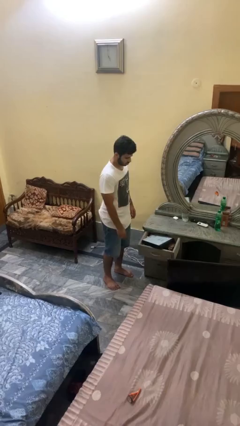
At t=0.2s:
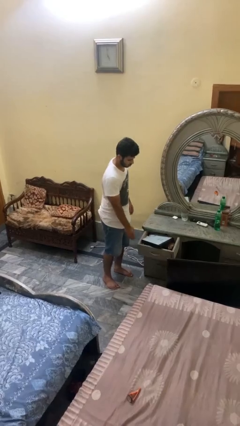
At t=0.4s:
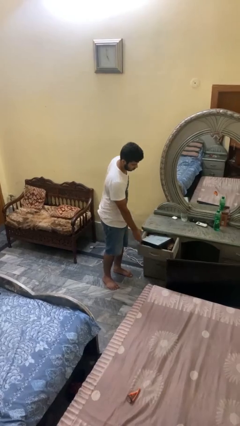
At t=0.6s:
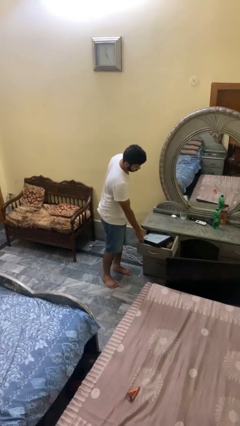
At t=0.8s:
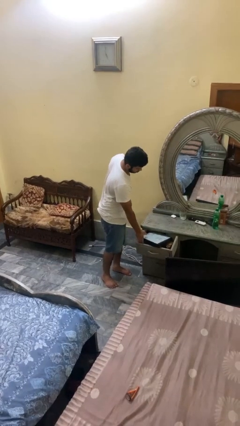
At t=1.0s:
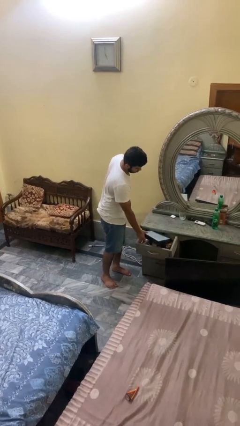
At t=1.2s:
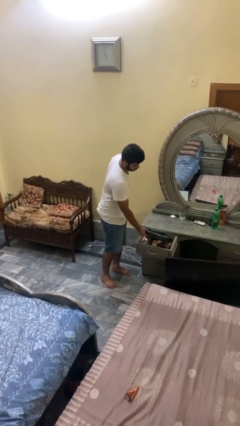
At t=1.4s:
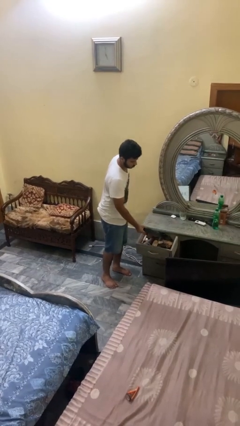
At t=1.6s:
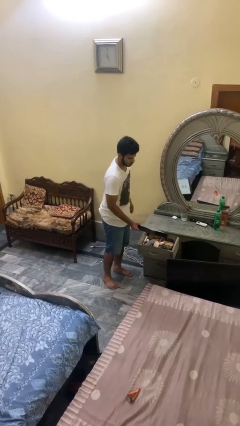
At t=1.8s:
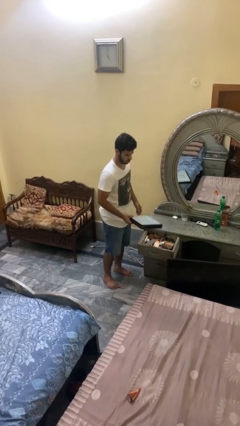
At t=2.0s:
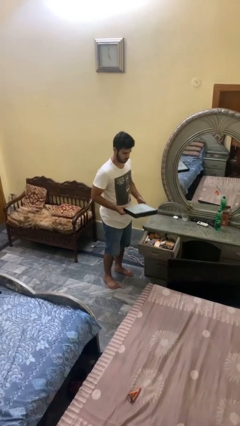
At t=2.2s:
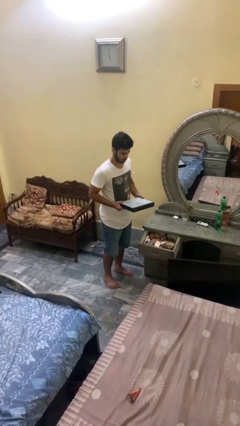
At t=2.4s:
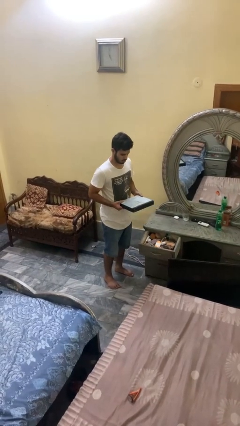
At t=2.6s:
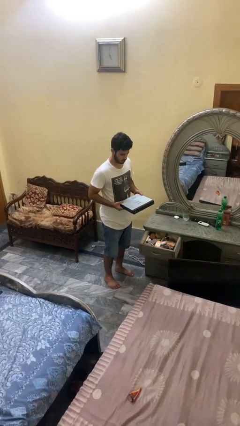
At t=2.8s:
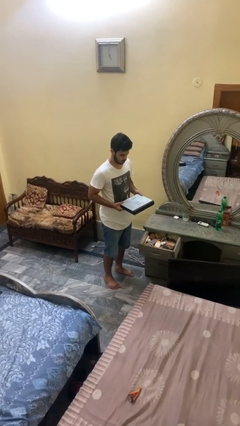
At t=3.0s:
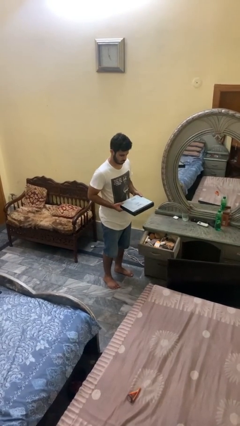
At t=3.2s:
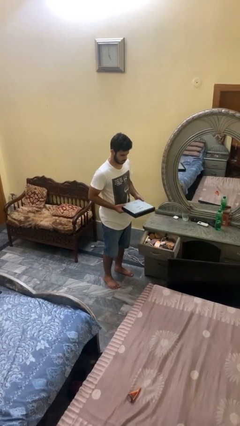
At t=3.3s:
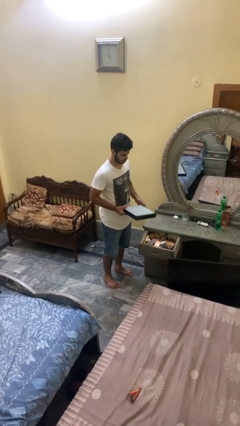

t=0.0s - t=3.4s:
person picks up object from cabinet

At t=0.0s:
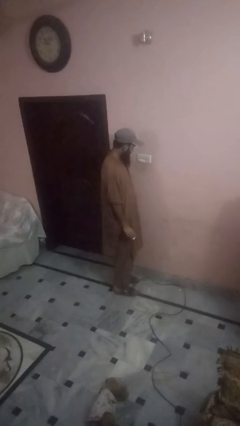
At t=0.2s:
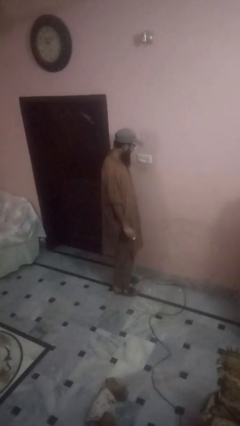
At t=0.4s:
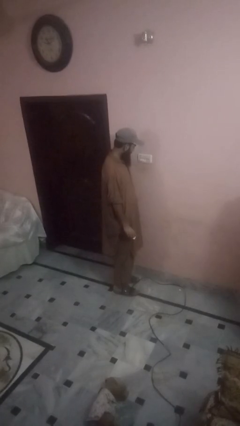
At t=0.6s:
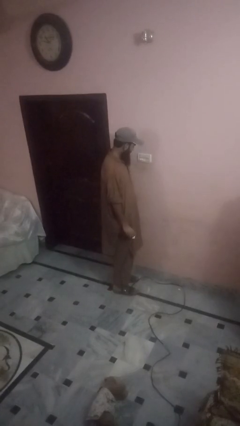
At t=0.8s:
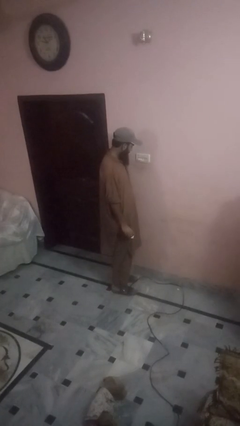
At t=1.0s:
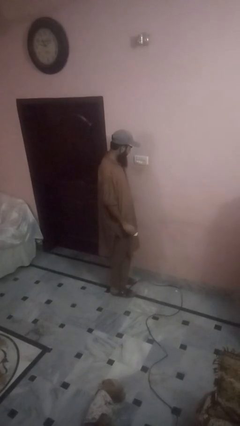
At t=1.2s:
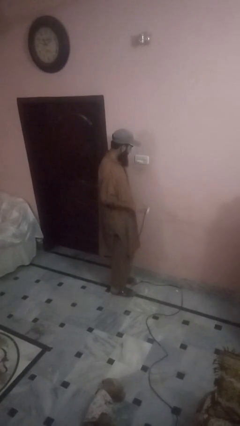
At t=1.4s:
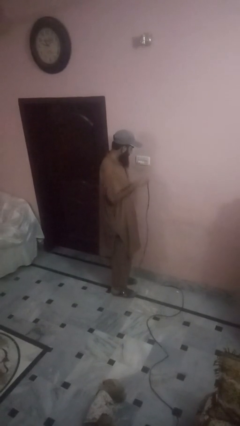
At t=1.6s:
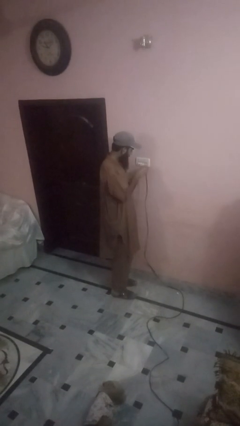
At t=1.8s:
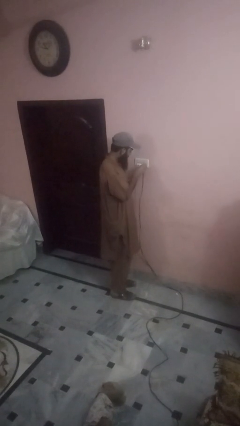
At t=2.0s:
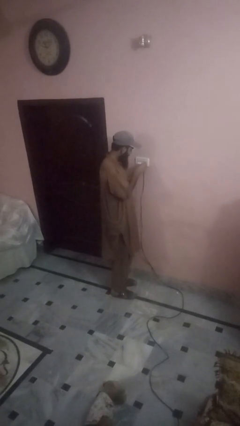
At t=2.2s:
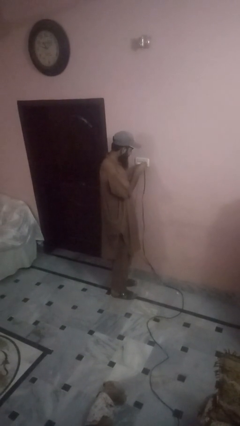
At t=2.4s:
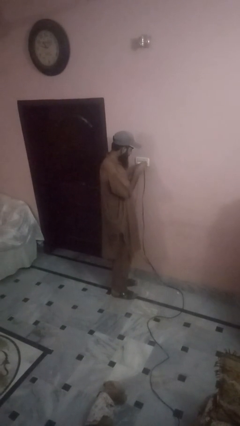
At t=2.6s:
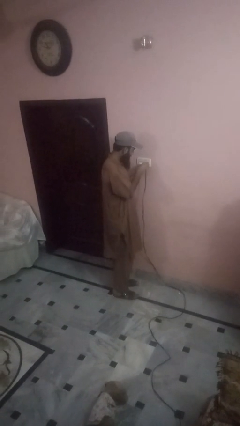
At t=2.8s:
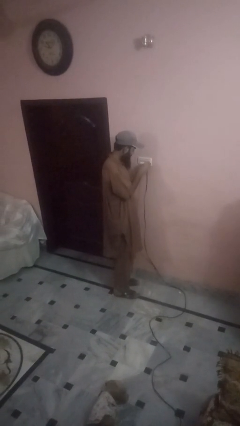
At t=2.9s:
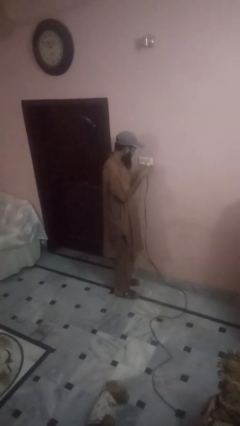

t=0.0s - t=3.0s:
person plugs into electrical socket

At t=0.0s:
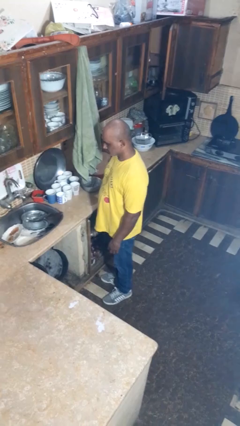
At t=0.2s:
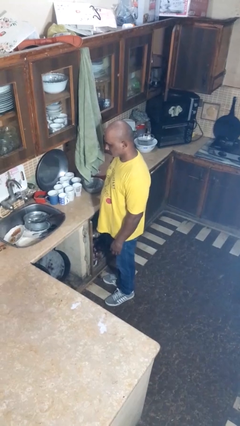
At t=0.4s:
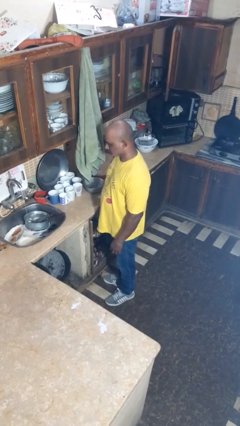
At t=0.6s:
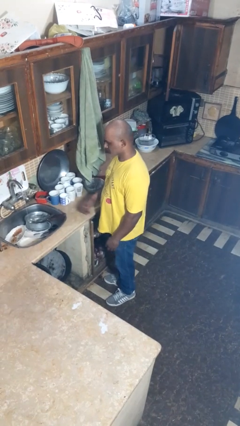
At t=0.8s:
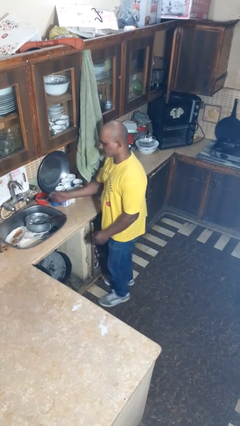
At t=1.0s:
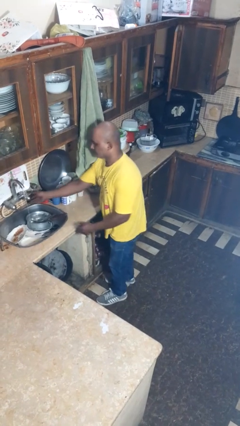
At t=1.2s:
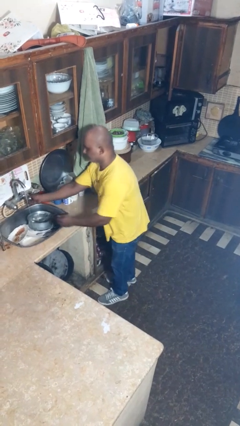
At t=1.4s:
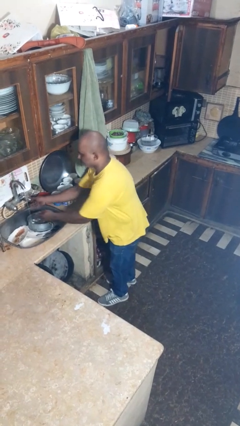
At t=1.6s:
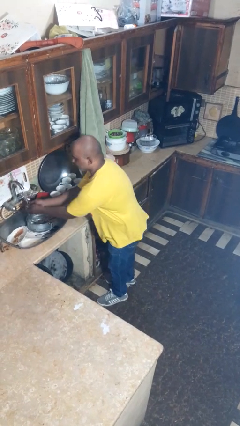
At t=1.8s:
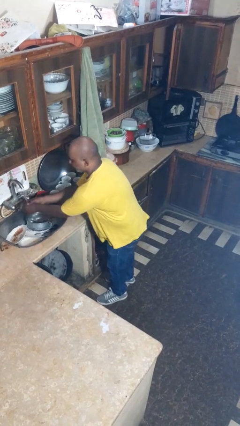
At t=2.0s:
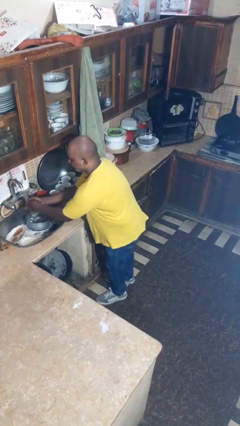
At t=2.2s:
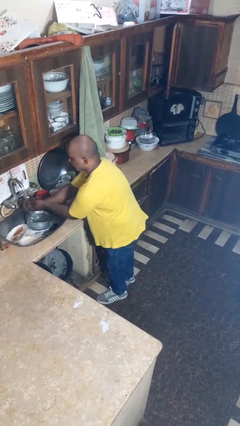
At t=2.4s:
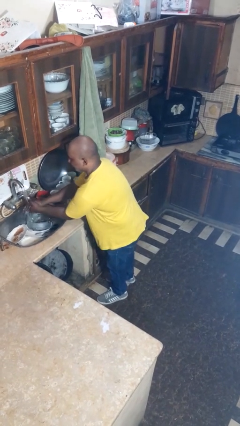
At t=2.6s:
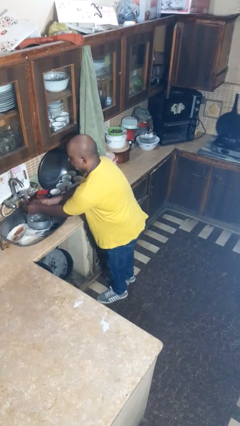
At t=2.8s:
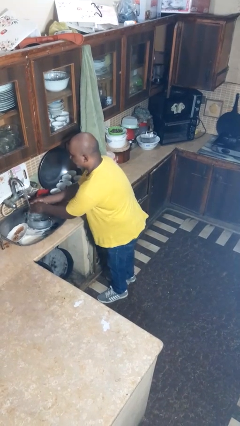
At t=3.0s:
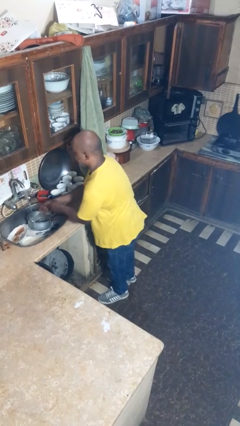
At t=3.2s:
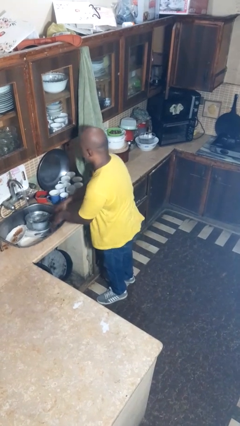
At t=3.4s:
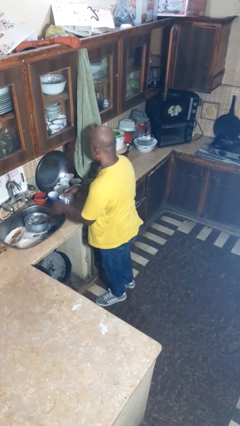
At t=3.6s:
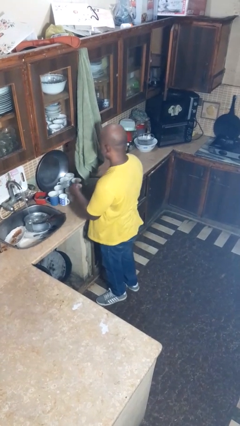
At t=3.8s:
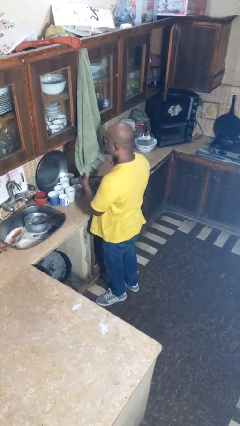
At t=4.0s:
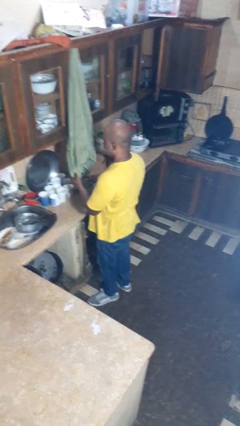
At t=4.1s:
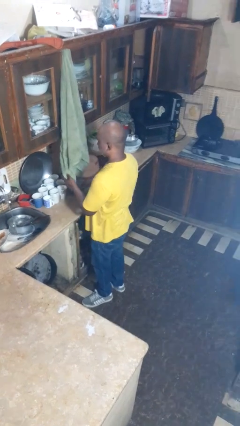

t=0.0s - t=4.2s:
person washes hands

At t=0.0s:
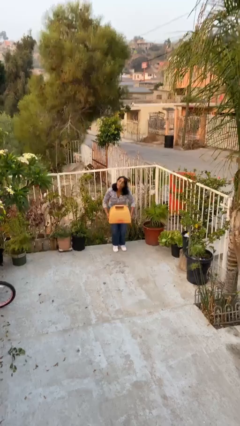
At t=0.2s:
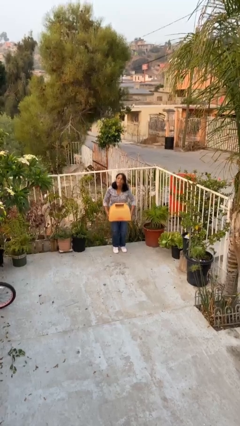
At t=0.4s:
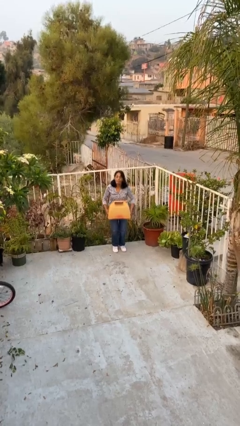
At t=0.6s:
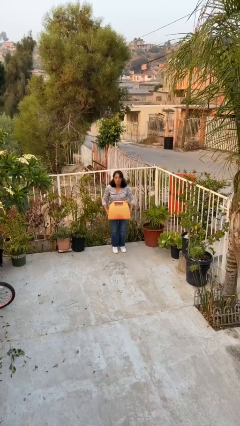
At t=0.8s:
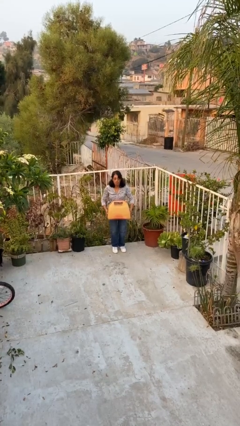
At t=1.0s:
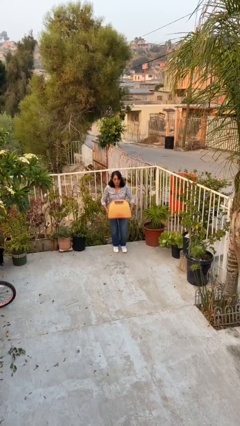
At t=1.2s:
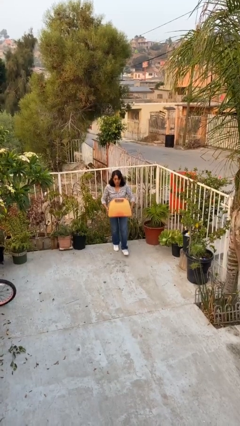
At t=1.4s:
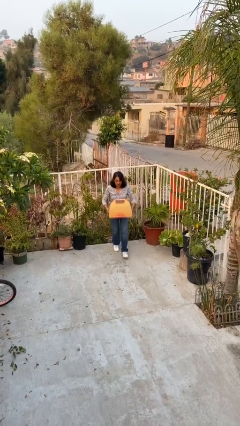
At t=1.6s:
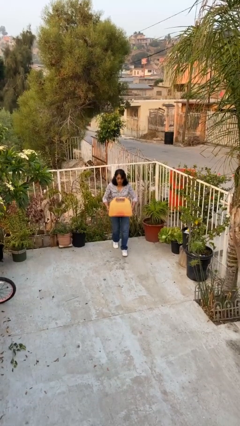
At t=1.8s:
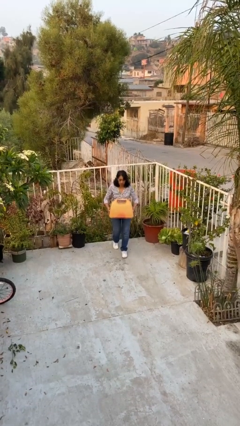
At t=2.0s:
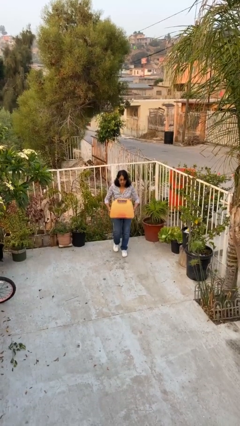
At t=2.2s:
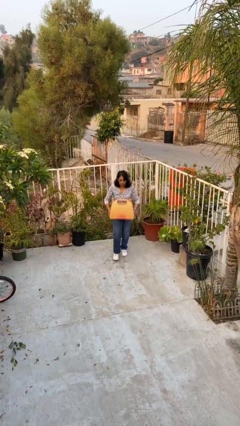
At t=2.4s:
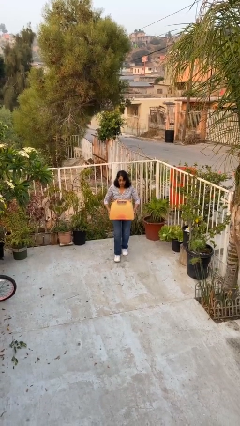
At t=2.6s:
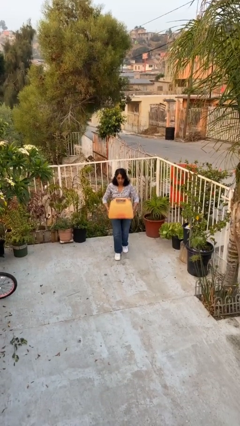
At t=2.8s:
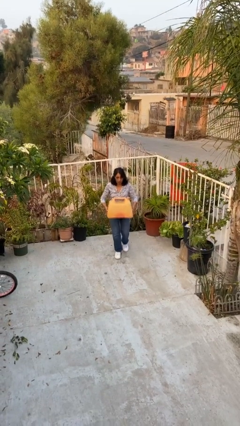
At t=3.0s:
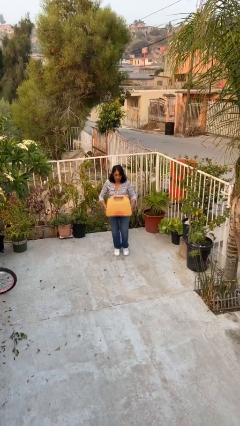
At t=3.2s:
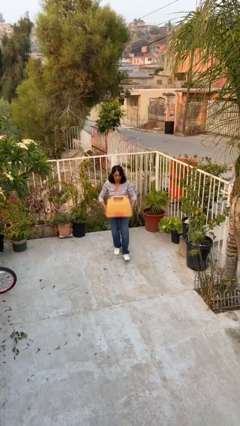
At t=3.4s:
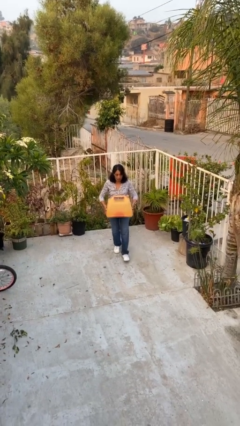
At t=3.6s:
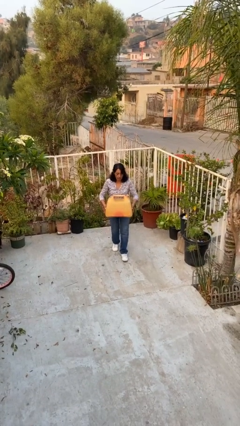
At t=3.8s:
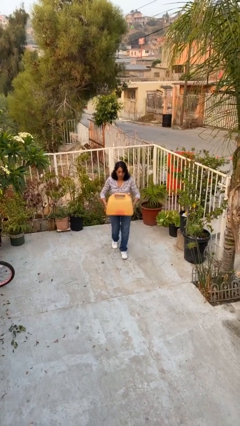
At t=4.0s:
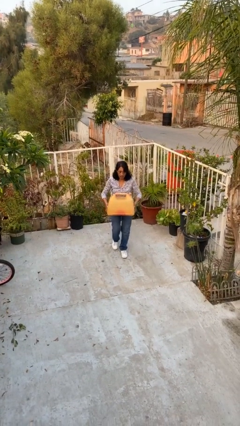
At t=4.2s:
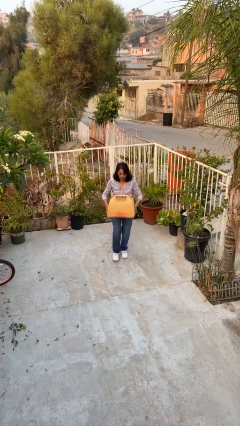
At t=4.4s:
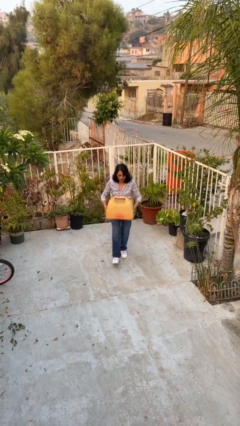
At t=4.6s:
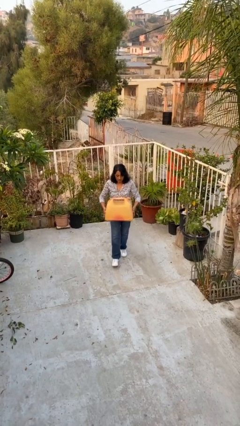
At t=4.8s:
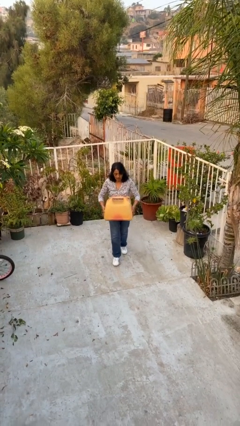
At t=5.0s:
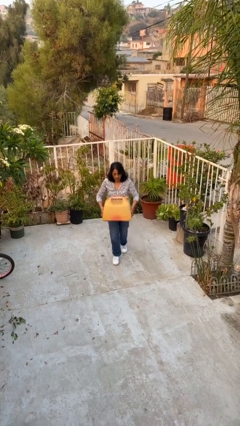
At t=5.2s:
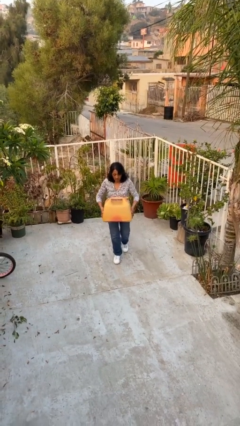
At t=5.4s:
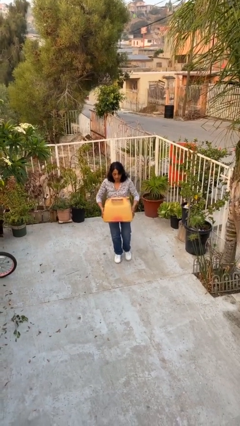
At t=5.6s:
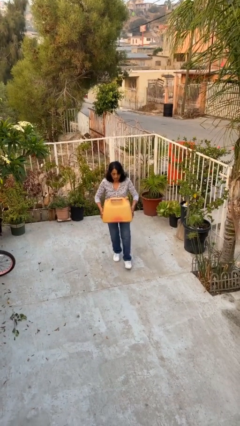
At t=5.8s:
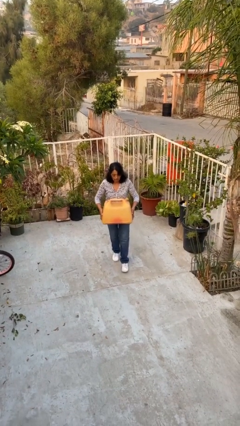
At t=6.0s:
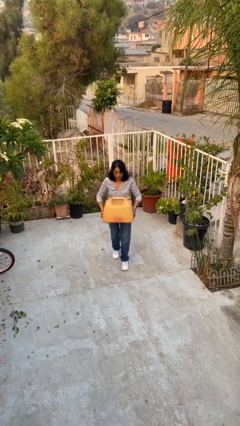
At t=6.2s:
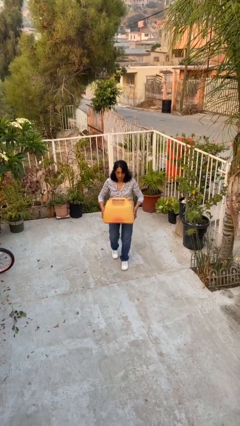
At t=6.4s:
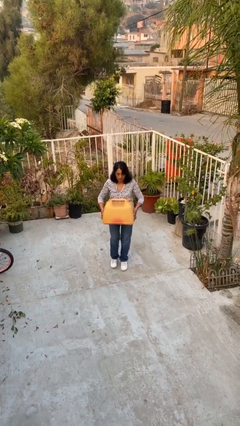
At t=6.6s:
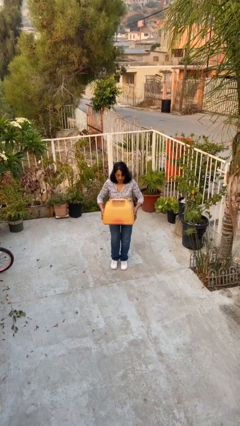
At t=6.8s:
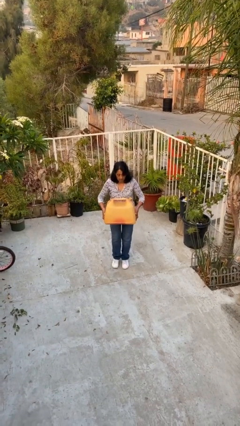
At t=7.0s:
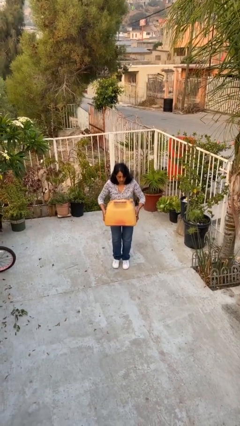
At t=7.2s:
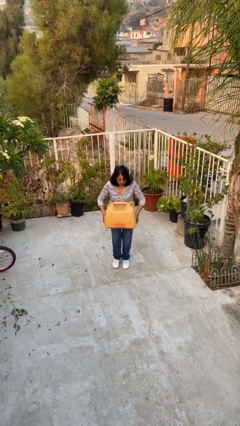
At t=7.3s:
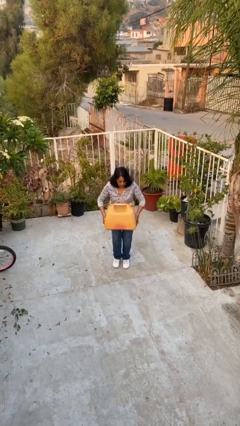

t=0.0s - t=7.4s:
person carries heavy object
